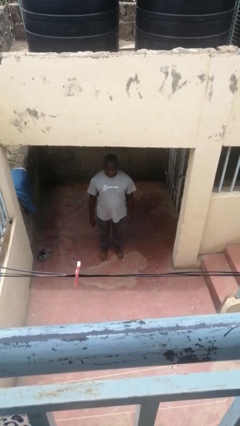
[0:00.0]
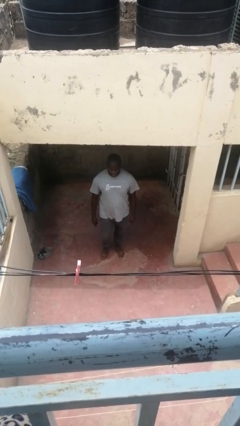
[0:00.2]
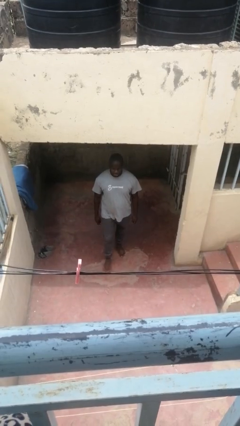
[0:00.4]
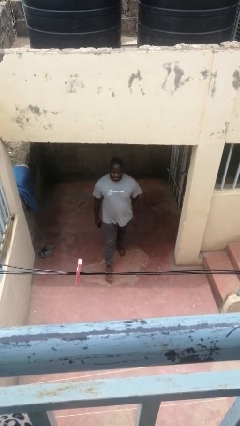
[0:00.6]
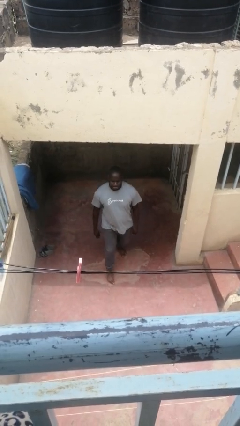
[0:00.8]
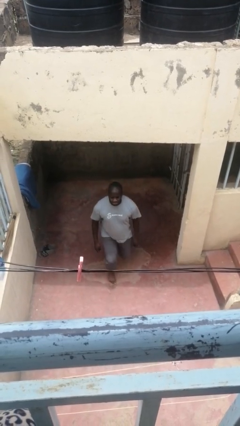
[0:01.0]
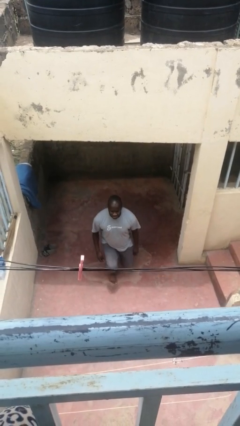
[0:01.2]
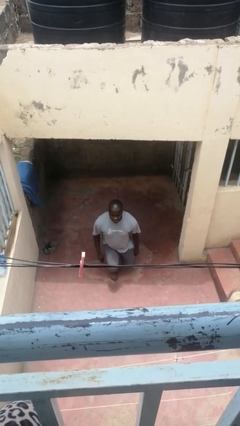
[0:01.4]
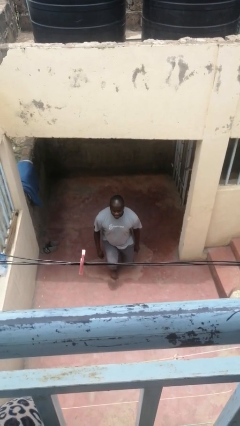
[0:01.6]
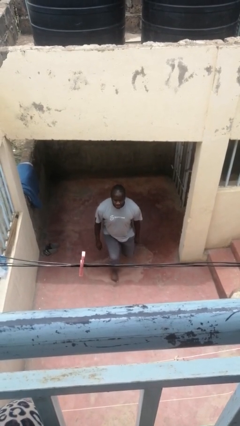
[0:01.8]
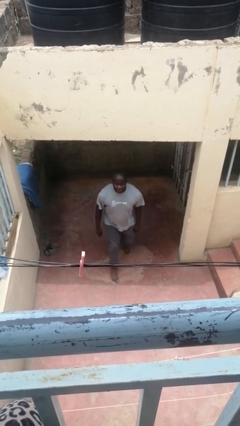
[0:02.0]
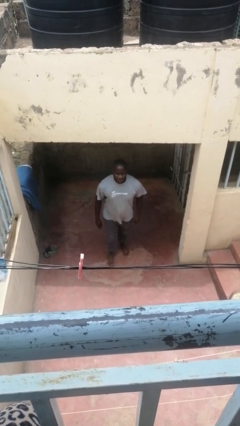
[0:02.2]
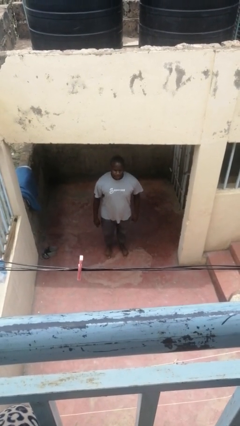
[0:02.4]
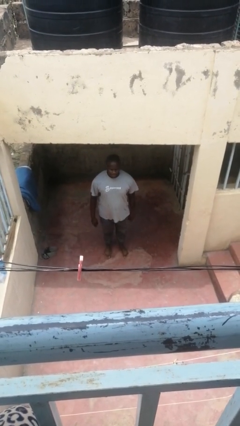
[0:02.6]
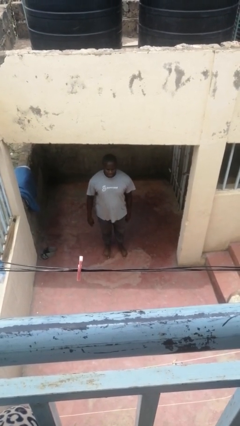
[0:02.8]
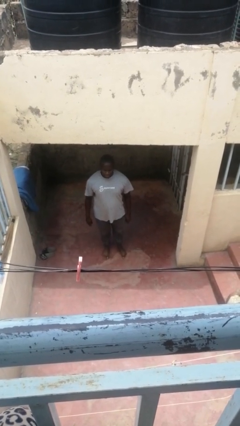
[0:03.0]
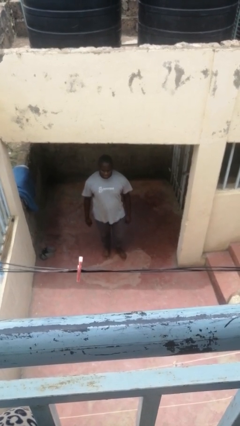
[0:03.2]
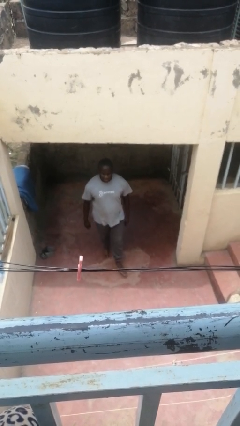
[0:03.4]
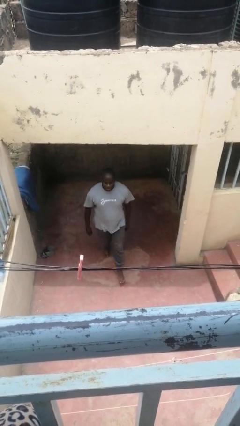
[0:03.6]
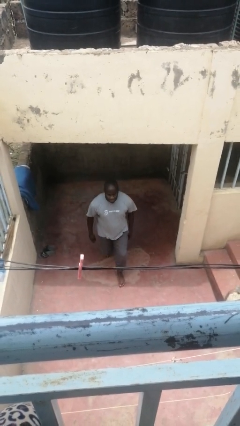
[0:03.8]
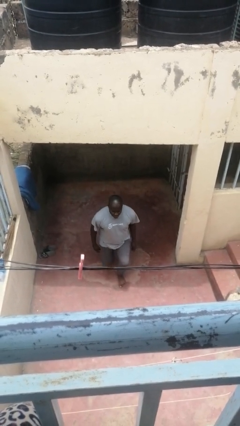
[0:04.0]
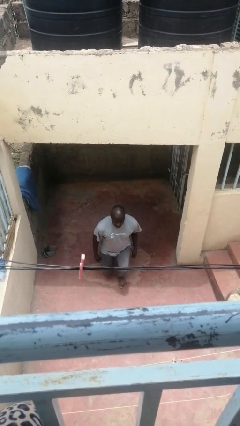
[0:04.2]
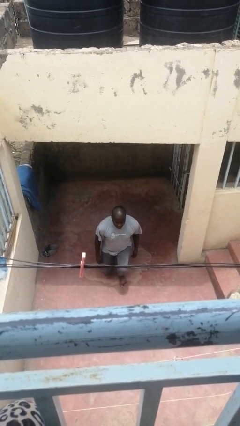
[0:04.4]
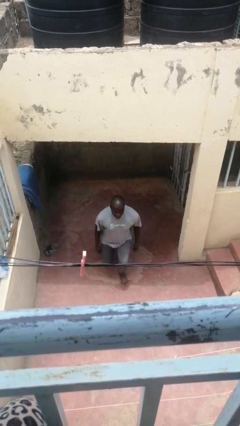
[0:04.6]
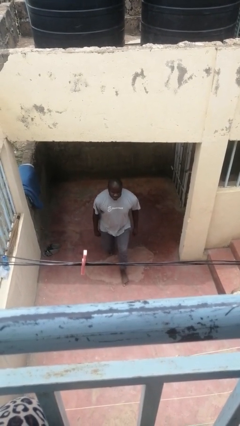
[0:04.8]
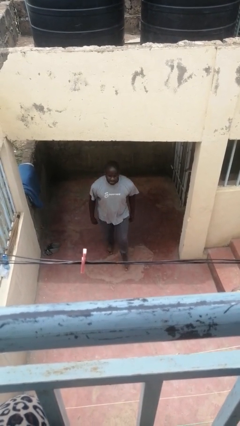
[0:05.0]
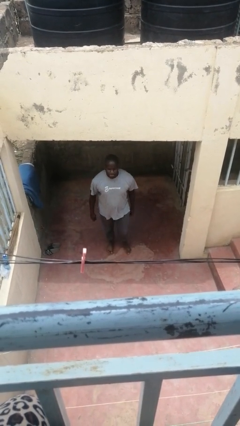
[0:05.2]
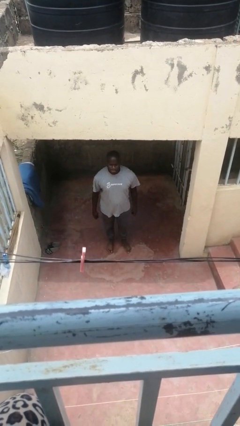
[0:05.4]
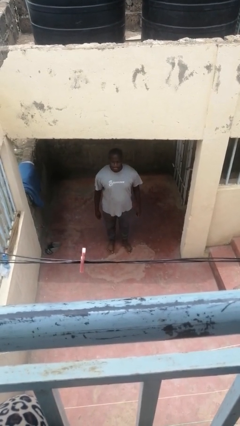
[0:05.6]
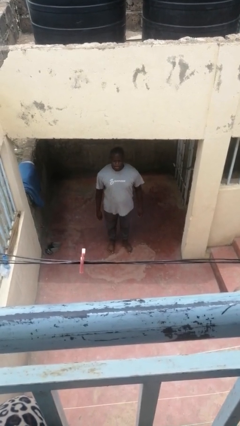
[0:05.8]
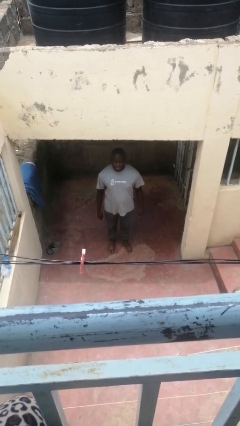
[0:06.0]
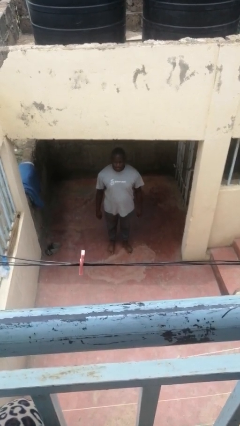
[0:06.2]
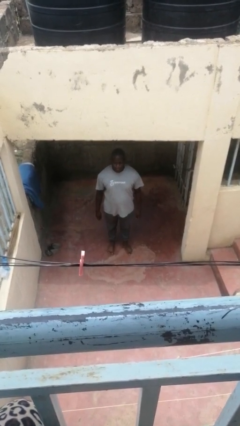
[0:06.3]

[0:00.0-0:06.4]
person exercises with lunges

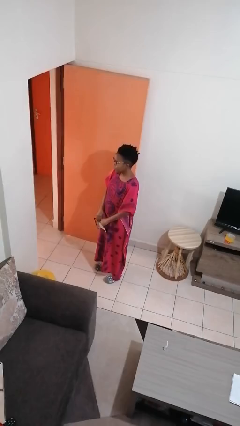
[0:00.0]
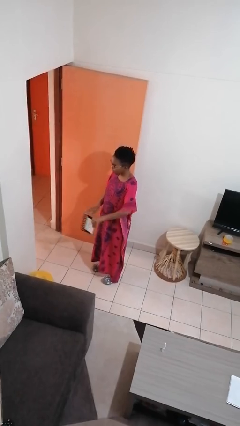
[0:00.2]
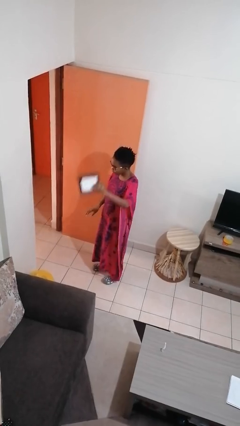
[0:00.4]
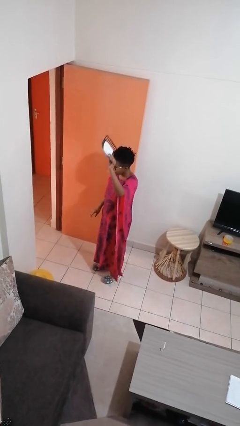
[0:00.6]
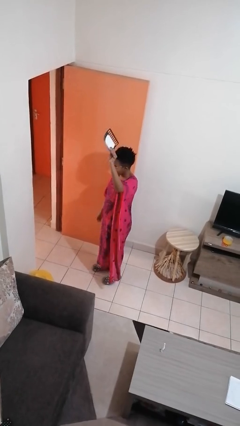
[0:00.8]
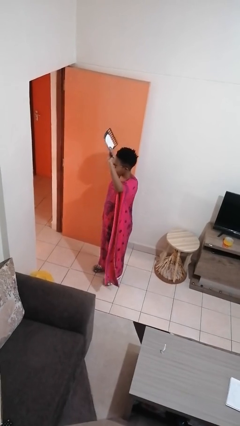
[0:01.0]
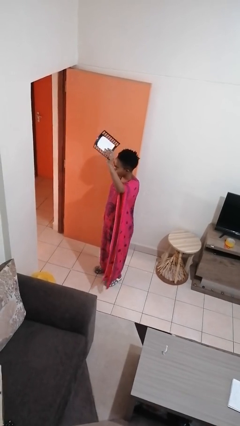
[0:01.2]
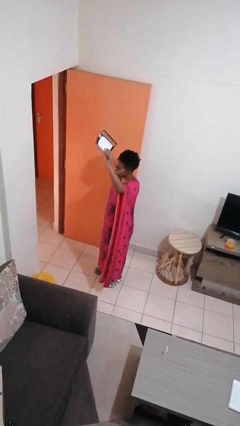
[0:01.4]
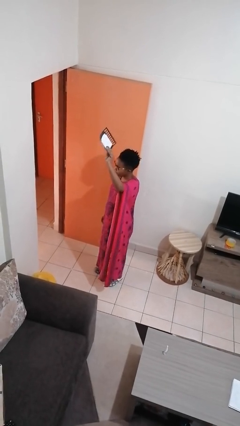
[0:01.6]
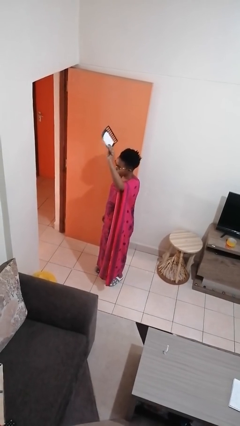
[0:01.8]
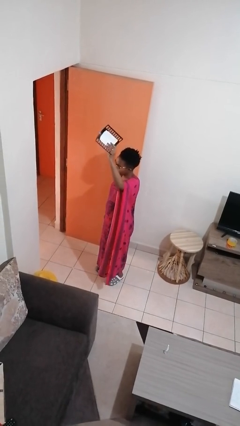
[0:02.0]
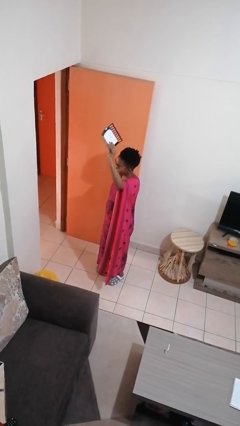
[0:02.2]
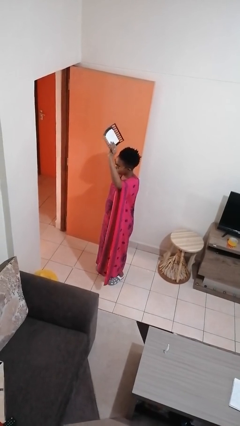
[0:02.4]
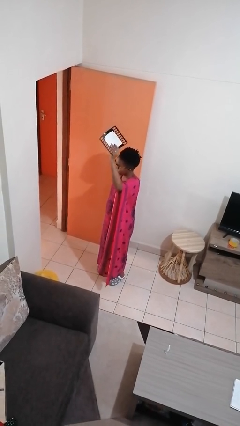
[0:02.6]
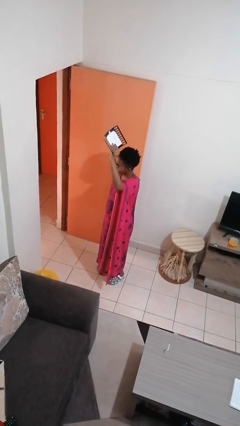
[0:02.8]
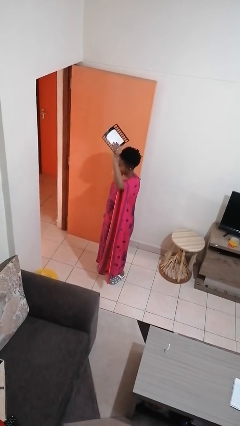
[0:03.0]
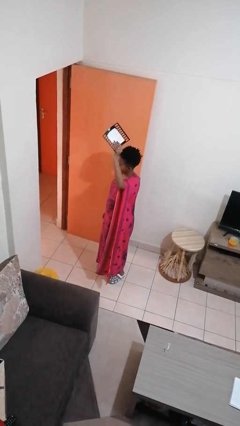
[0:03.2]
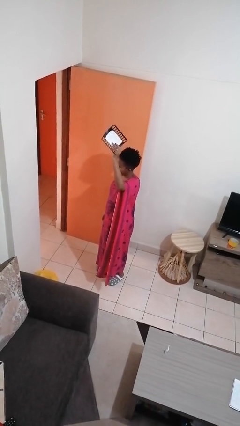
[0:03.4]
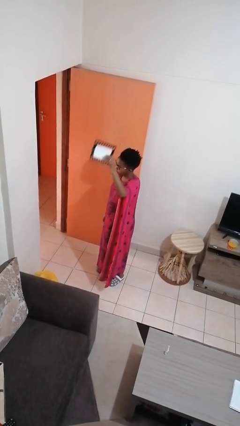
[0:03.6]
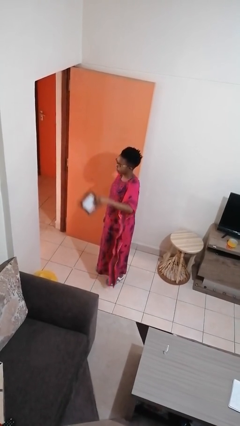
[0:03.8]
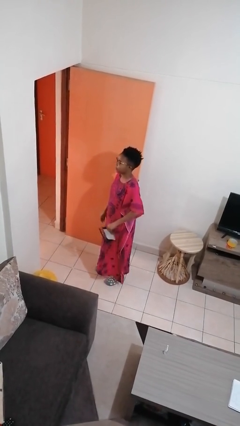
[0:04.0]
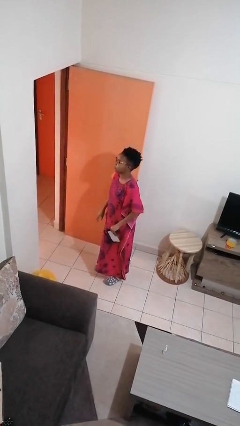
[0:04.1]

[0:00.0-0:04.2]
person holds object above head

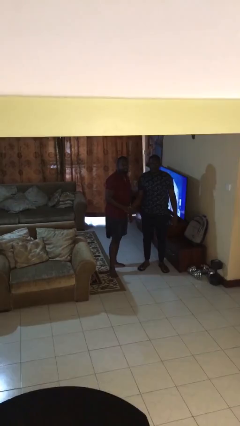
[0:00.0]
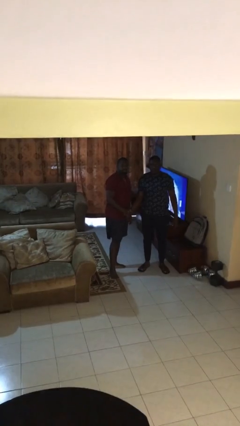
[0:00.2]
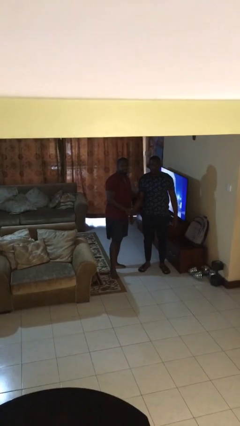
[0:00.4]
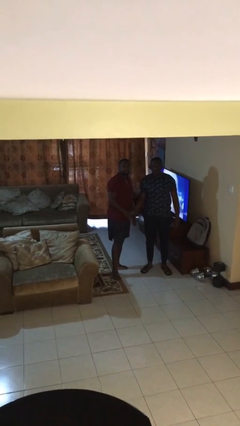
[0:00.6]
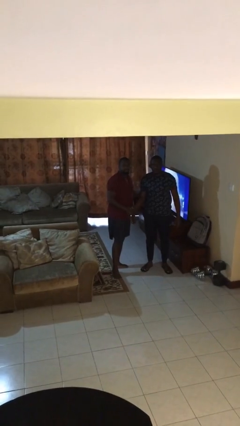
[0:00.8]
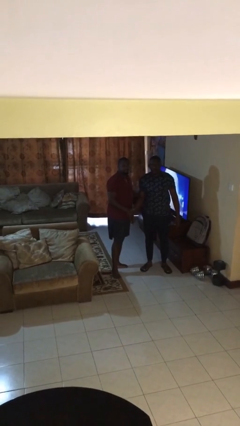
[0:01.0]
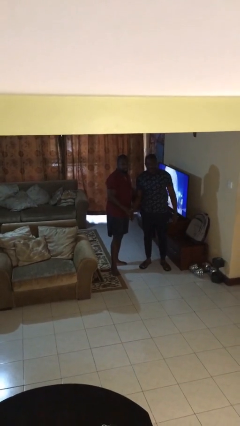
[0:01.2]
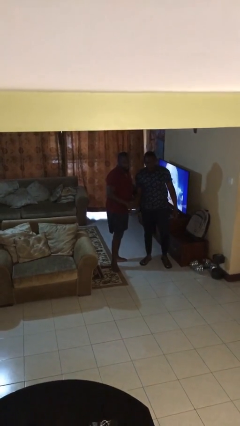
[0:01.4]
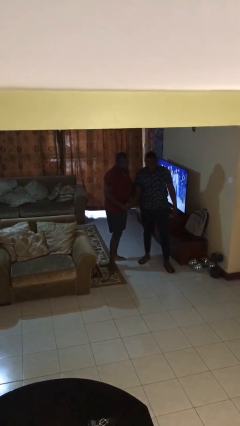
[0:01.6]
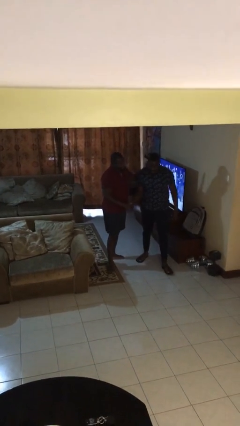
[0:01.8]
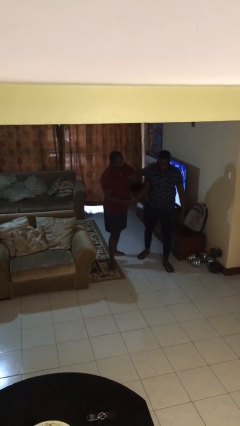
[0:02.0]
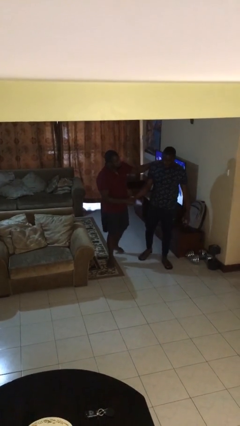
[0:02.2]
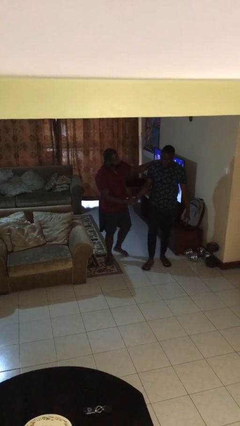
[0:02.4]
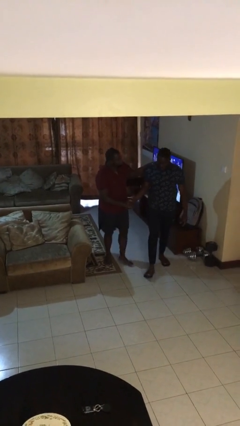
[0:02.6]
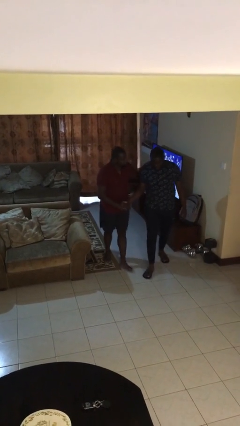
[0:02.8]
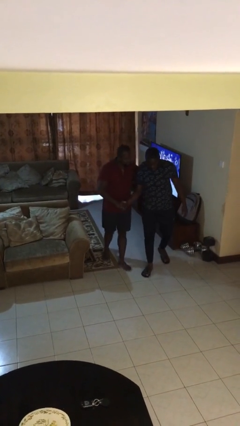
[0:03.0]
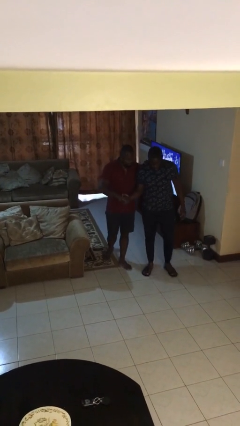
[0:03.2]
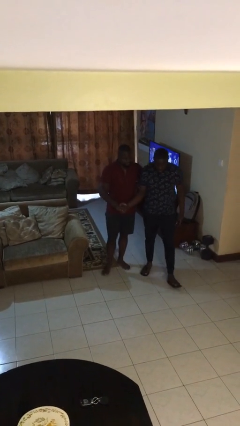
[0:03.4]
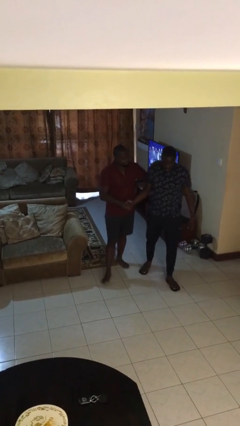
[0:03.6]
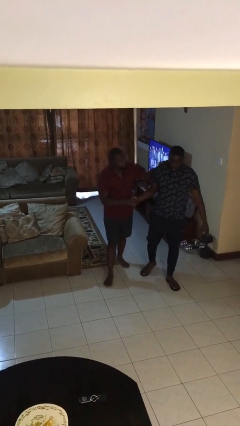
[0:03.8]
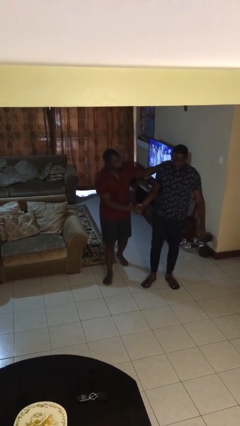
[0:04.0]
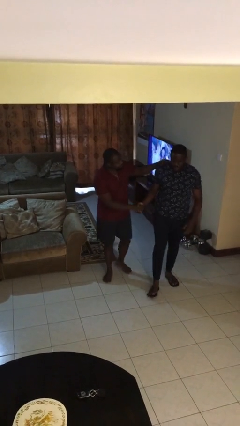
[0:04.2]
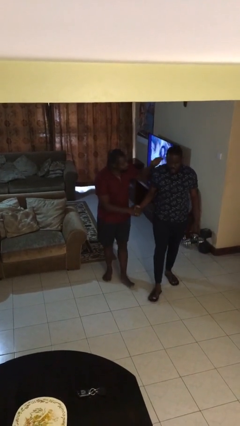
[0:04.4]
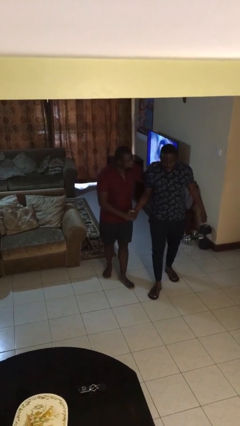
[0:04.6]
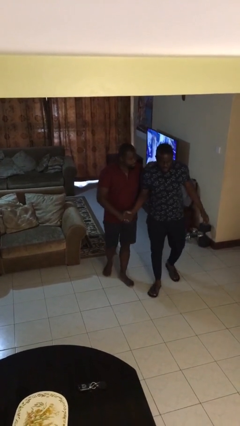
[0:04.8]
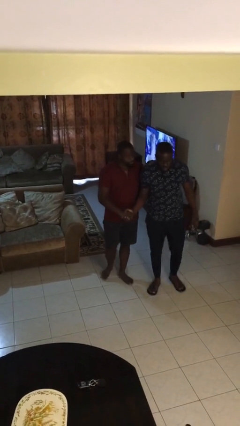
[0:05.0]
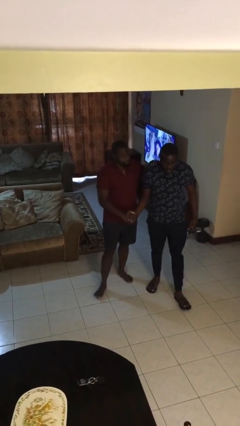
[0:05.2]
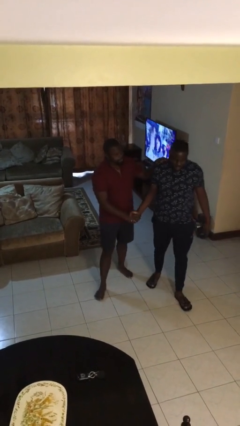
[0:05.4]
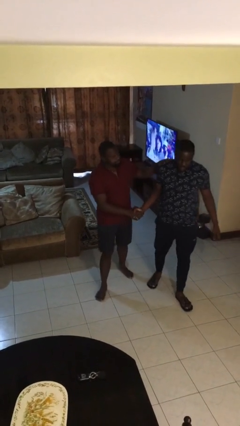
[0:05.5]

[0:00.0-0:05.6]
person holds hand

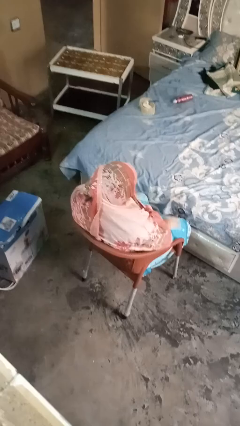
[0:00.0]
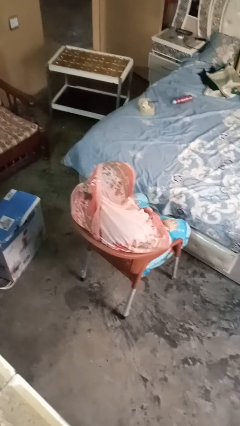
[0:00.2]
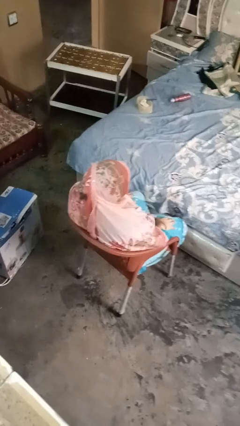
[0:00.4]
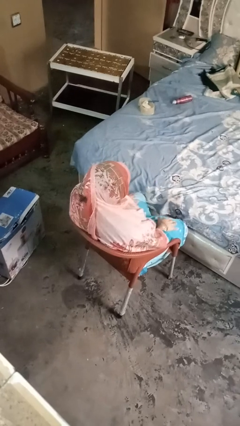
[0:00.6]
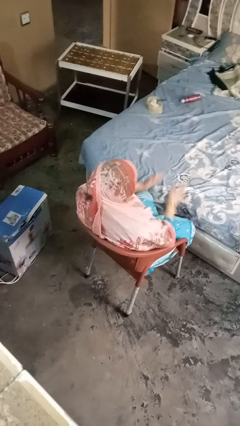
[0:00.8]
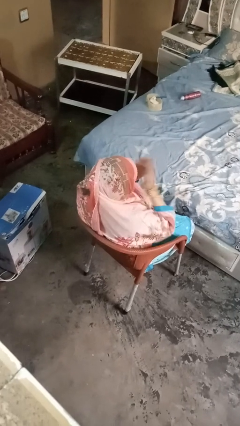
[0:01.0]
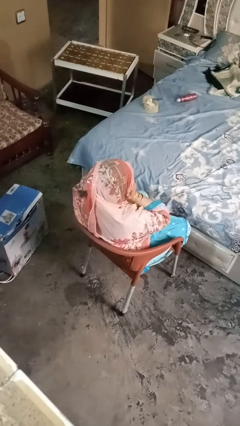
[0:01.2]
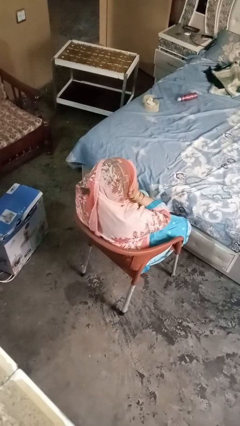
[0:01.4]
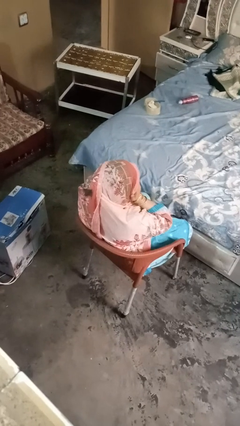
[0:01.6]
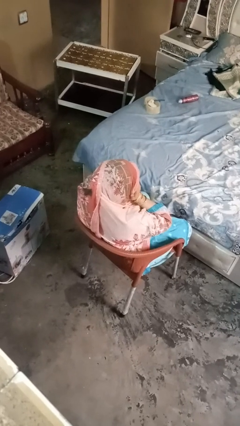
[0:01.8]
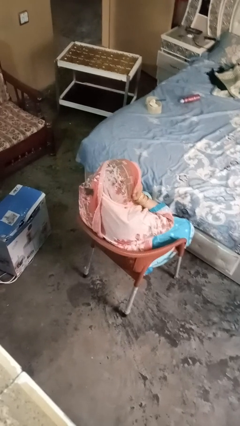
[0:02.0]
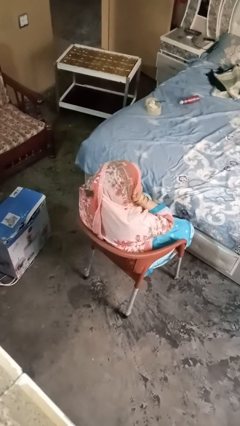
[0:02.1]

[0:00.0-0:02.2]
person covers face with hands
